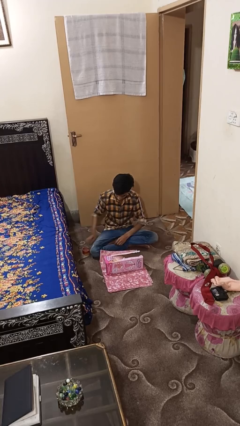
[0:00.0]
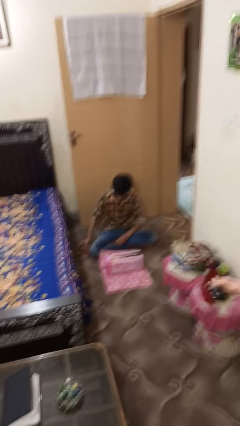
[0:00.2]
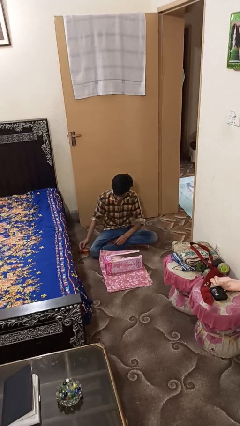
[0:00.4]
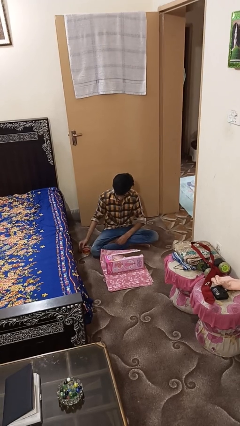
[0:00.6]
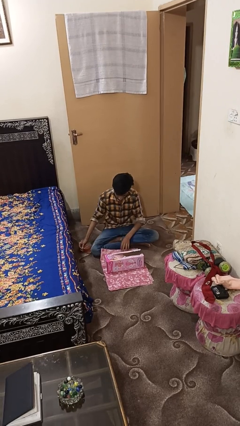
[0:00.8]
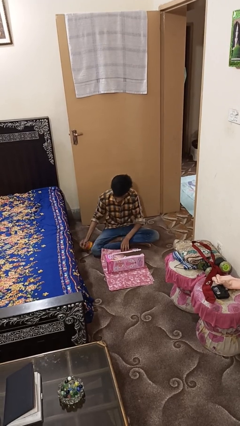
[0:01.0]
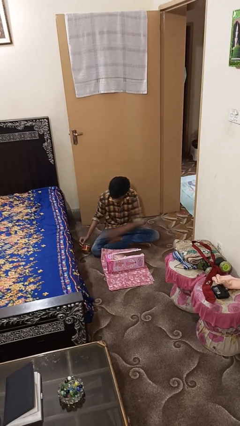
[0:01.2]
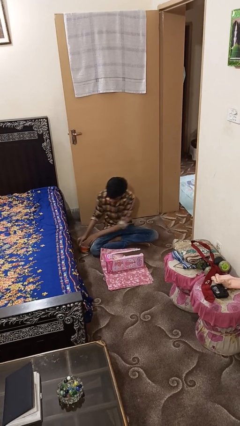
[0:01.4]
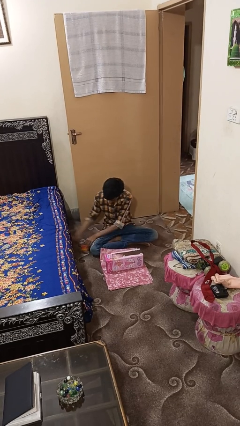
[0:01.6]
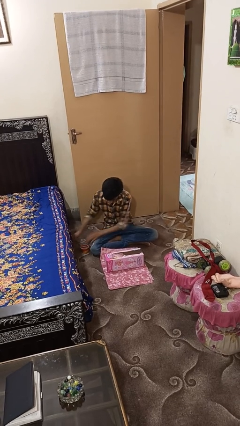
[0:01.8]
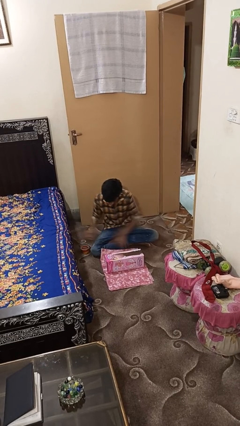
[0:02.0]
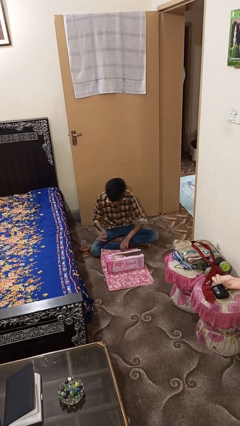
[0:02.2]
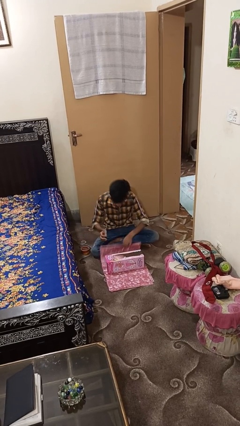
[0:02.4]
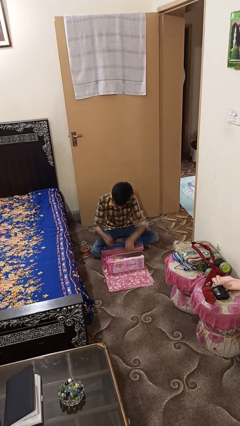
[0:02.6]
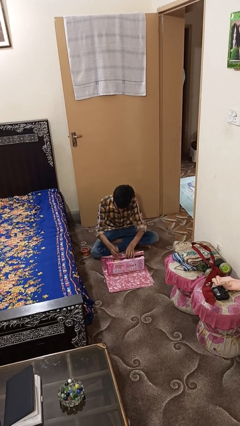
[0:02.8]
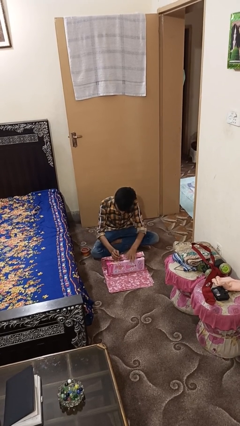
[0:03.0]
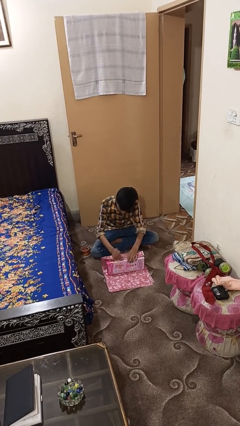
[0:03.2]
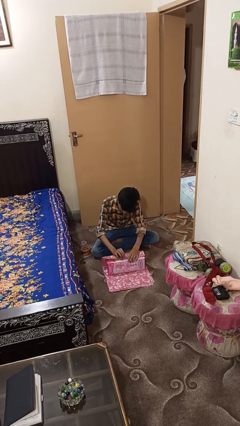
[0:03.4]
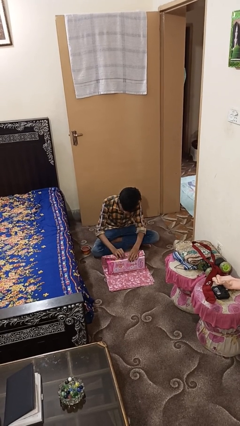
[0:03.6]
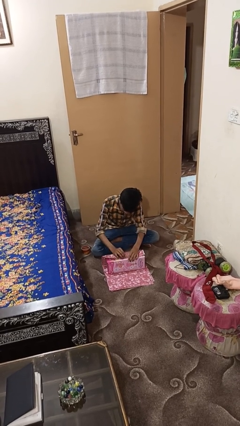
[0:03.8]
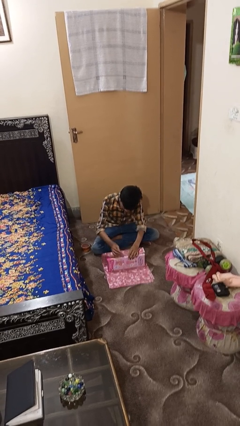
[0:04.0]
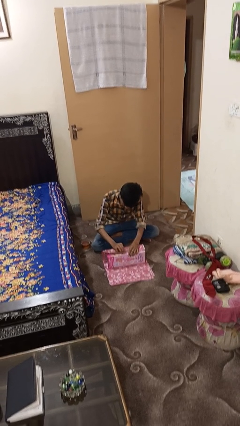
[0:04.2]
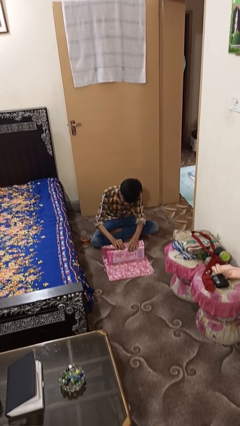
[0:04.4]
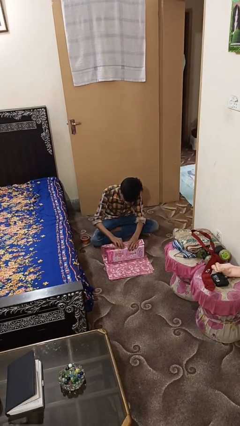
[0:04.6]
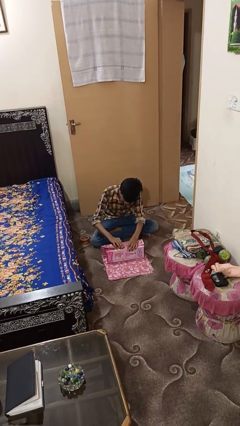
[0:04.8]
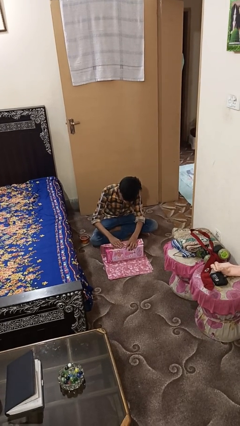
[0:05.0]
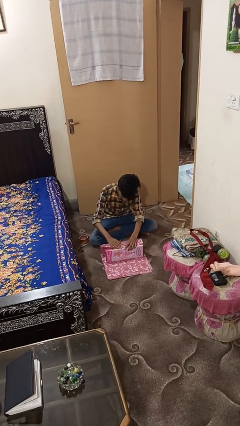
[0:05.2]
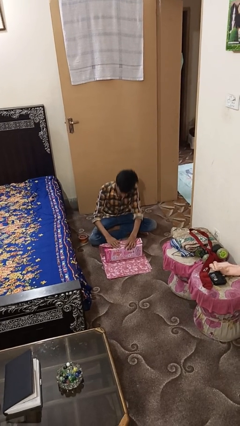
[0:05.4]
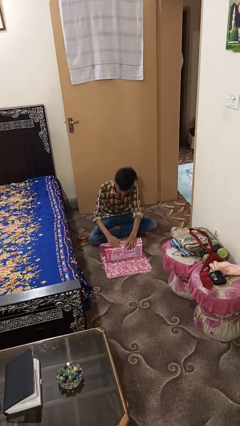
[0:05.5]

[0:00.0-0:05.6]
person wraps box

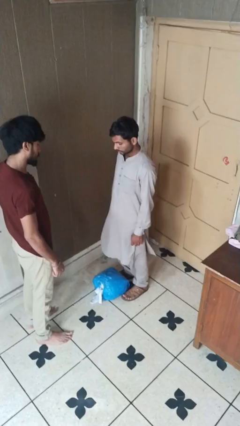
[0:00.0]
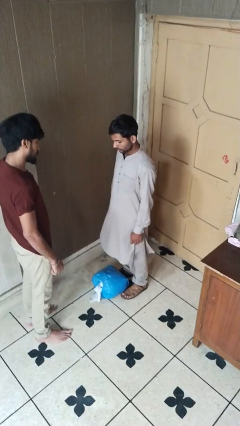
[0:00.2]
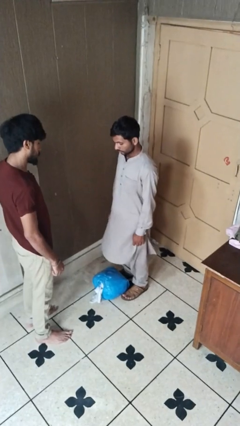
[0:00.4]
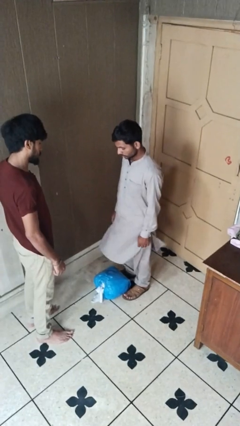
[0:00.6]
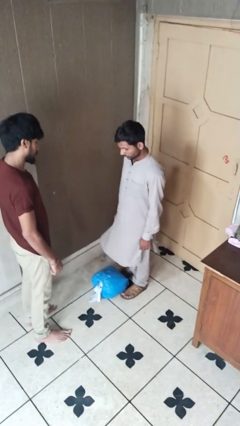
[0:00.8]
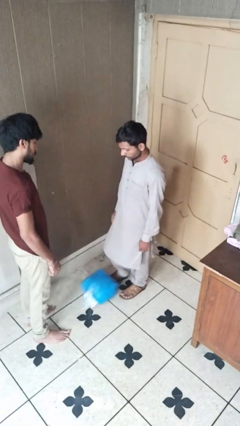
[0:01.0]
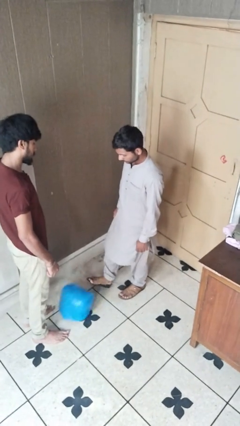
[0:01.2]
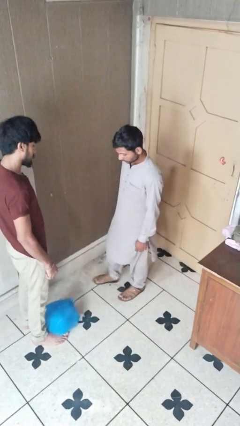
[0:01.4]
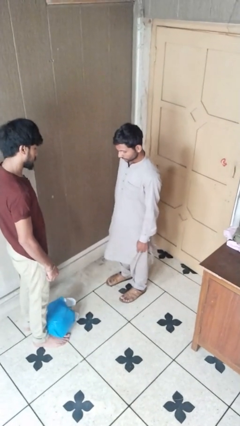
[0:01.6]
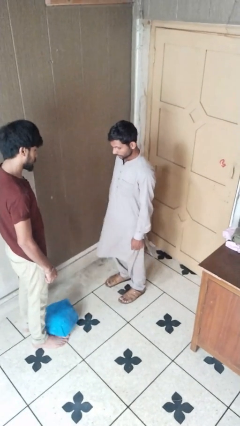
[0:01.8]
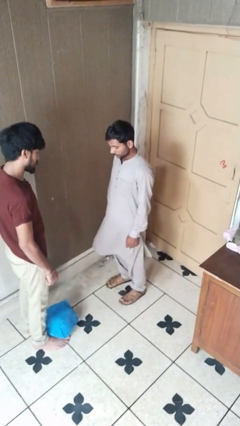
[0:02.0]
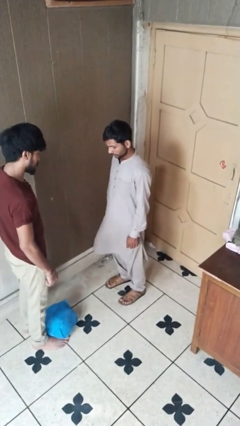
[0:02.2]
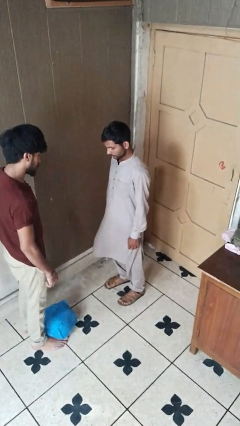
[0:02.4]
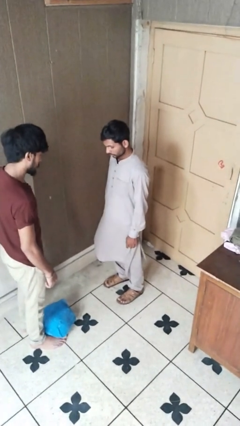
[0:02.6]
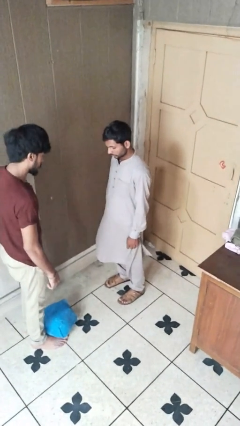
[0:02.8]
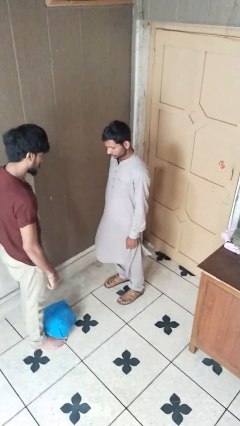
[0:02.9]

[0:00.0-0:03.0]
person kicks object to person

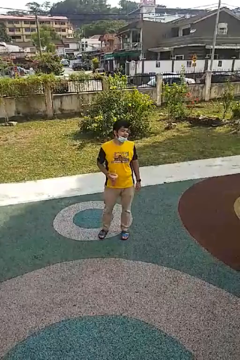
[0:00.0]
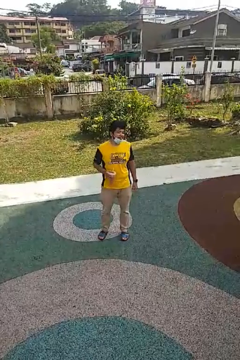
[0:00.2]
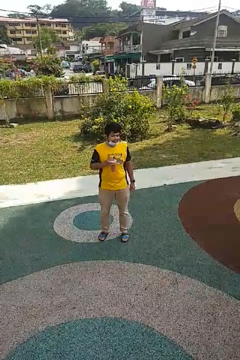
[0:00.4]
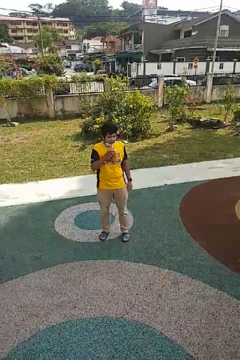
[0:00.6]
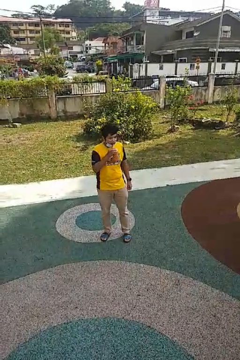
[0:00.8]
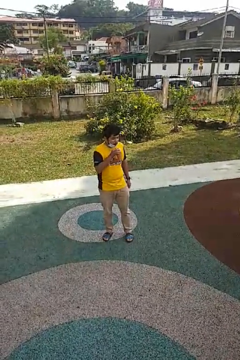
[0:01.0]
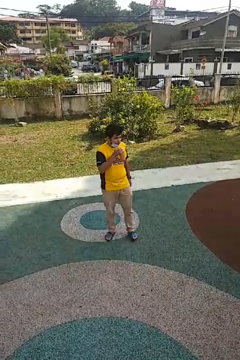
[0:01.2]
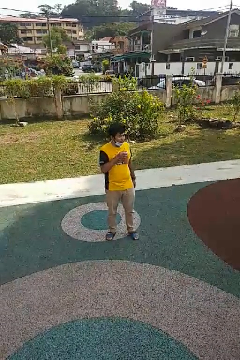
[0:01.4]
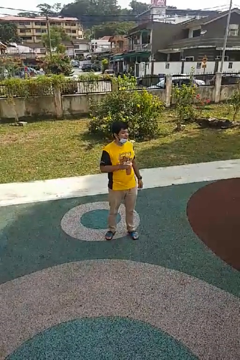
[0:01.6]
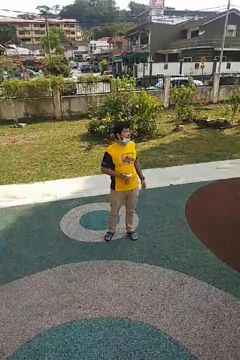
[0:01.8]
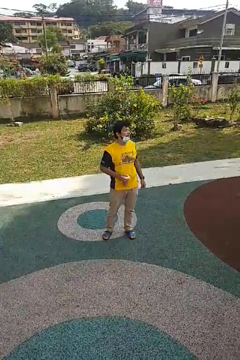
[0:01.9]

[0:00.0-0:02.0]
person drinks from straw

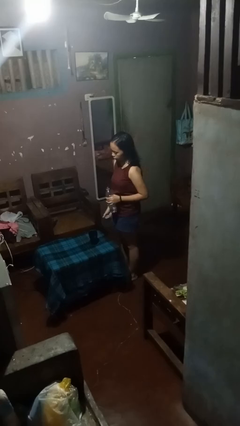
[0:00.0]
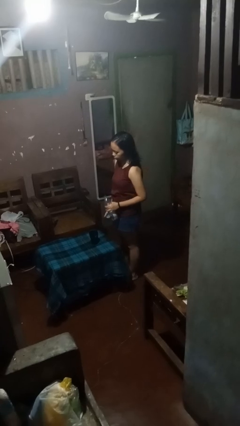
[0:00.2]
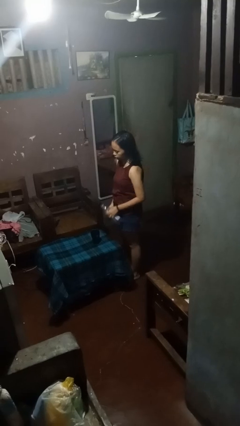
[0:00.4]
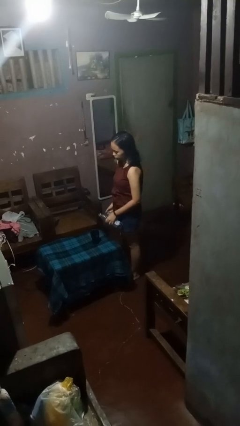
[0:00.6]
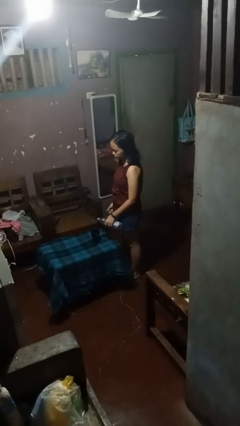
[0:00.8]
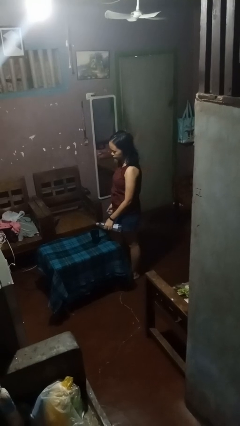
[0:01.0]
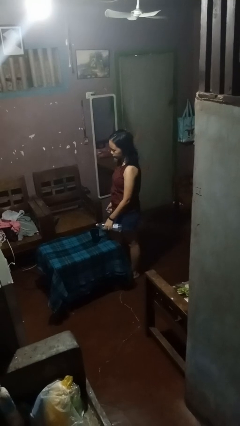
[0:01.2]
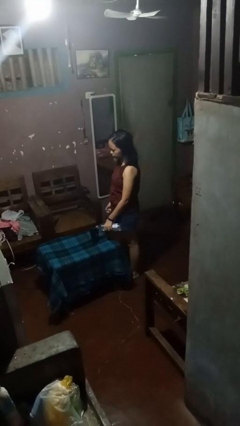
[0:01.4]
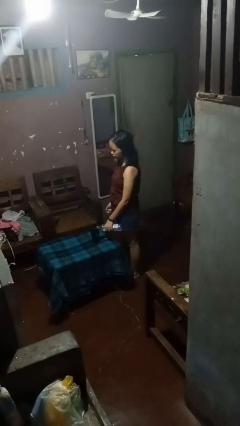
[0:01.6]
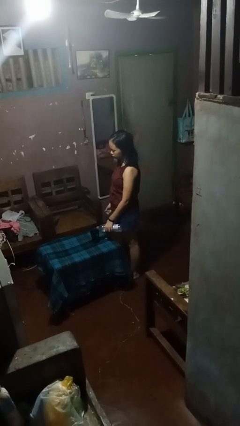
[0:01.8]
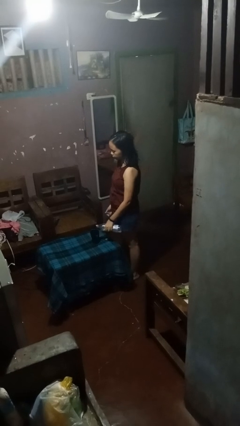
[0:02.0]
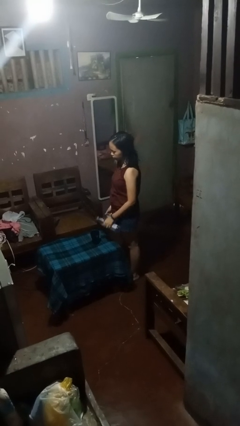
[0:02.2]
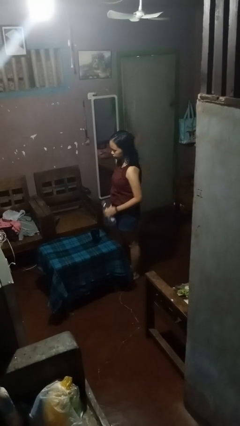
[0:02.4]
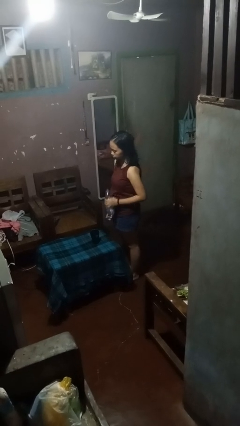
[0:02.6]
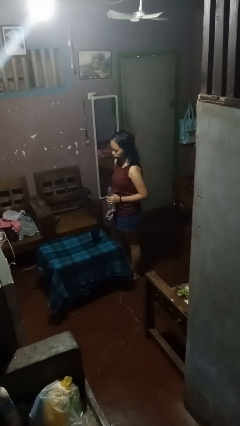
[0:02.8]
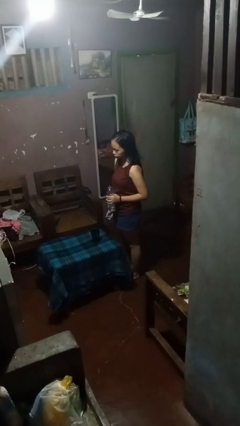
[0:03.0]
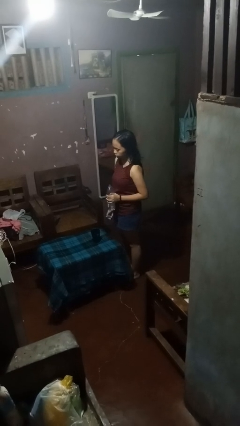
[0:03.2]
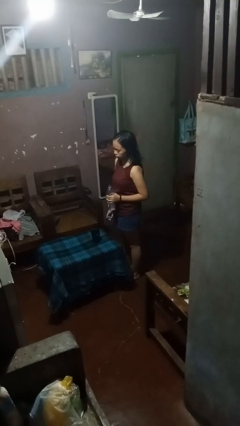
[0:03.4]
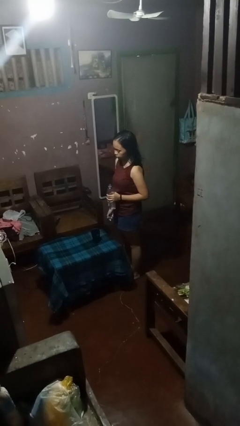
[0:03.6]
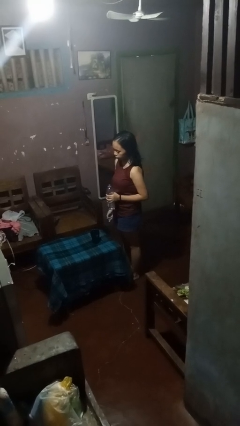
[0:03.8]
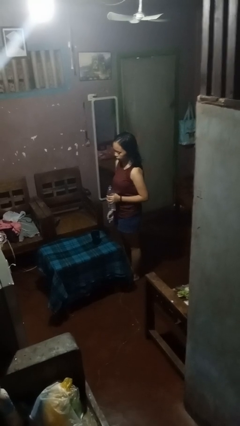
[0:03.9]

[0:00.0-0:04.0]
person pours liquid into cup

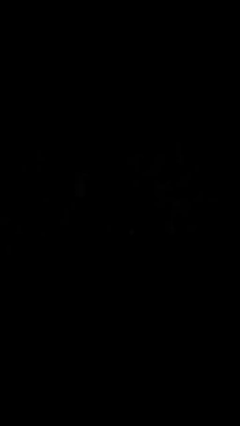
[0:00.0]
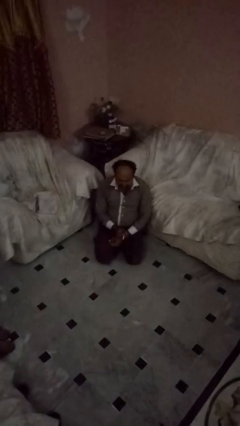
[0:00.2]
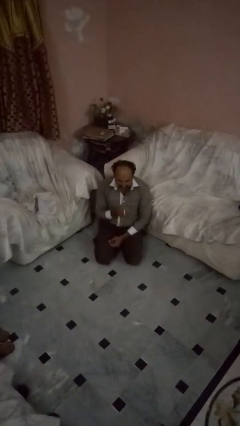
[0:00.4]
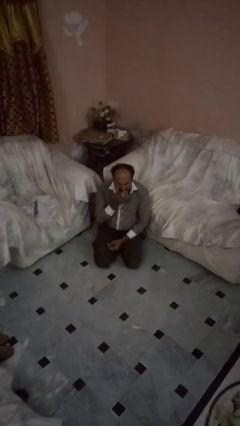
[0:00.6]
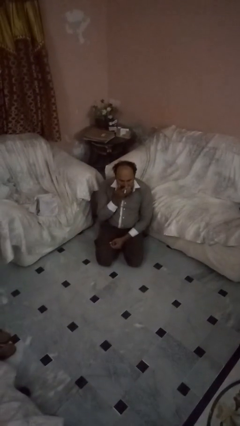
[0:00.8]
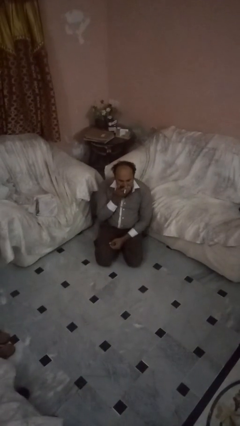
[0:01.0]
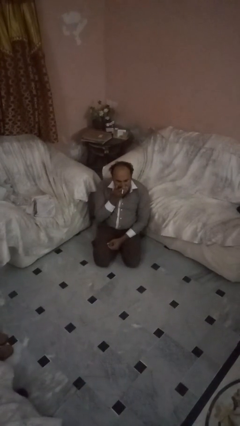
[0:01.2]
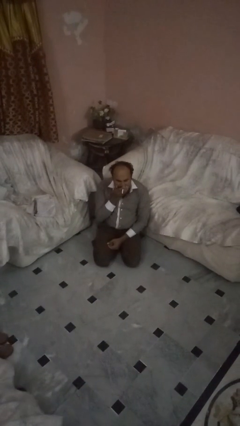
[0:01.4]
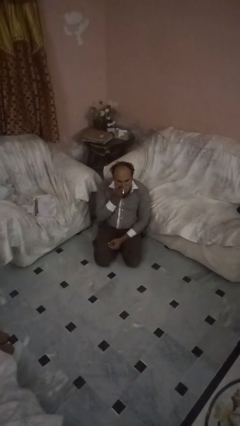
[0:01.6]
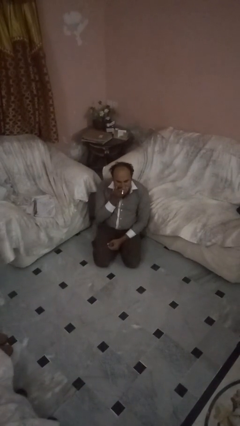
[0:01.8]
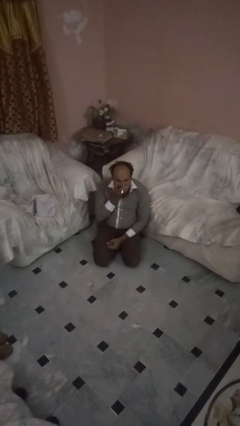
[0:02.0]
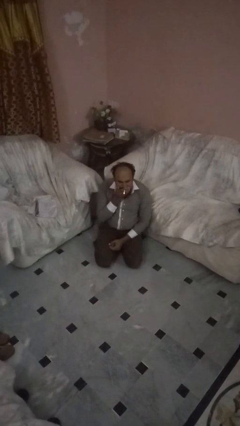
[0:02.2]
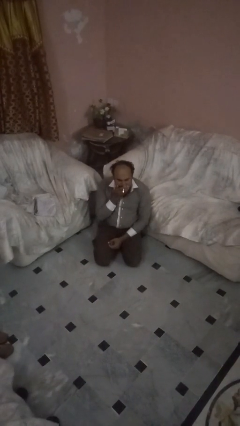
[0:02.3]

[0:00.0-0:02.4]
person vapes

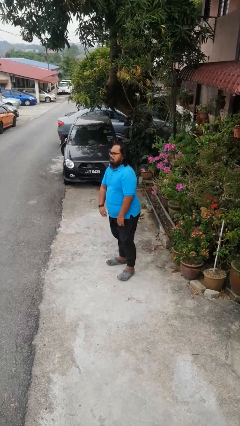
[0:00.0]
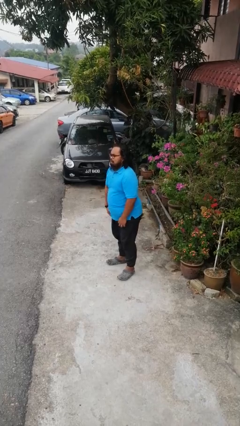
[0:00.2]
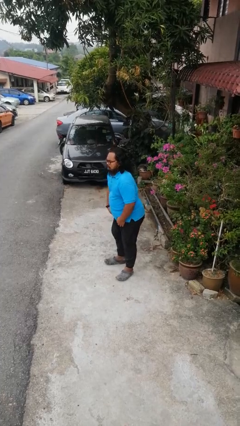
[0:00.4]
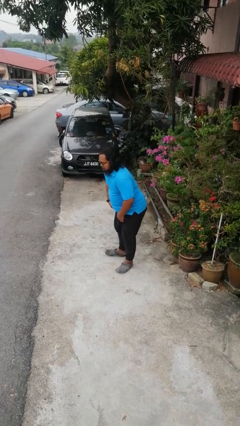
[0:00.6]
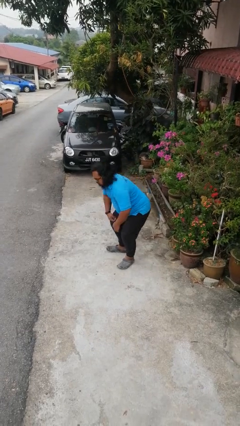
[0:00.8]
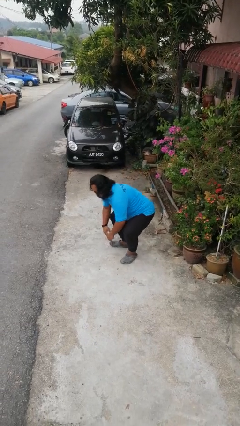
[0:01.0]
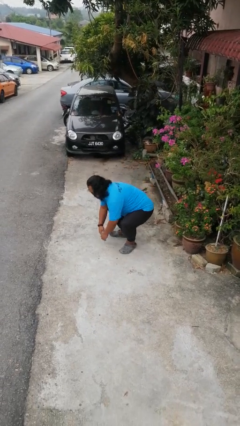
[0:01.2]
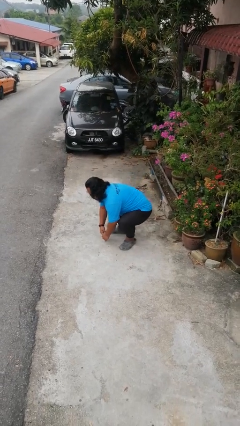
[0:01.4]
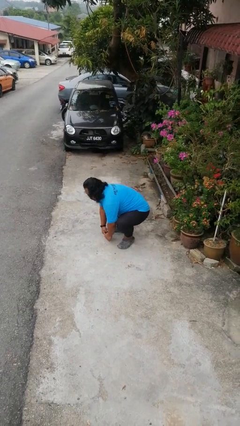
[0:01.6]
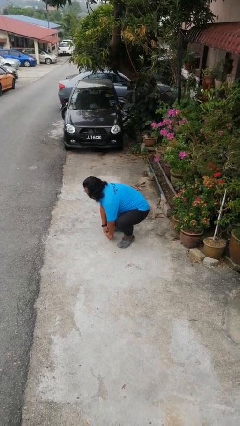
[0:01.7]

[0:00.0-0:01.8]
person squats
